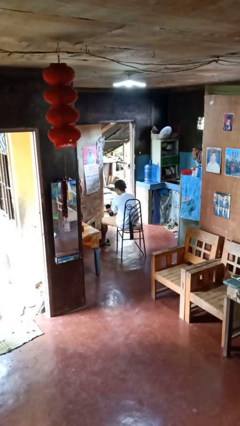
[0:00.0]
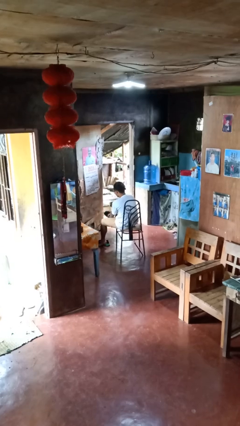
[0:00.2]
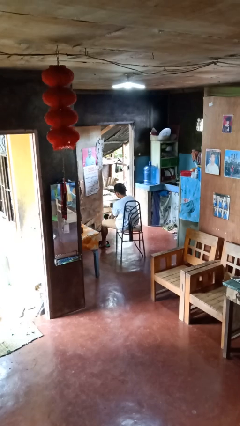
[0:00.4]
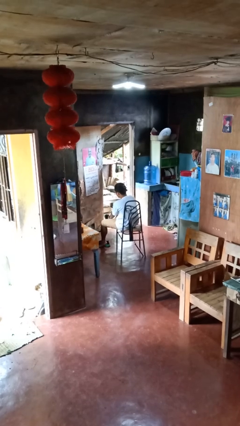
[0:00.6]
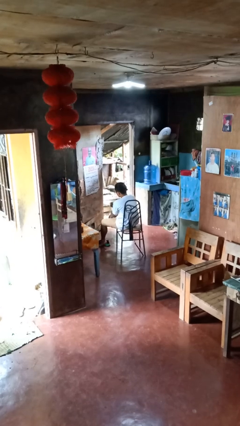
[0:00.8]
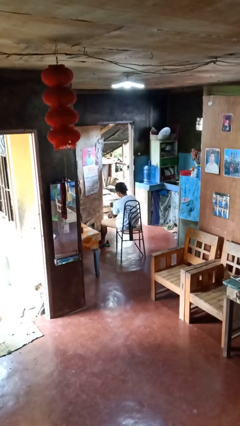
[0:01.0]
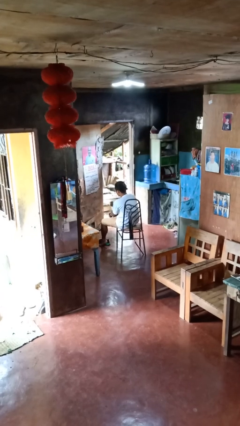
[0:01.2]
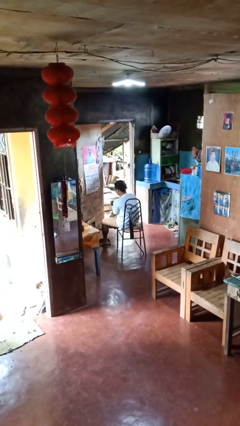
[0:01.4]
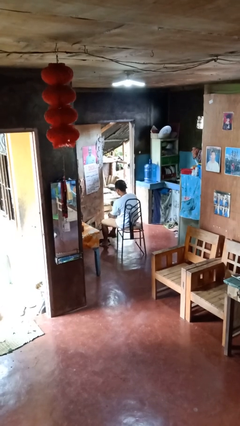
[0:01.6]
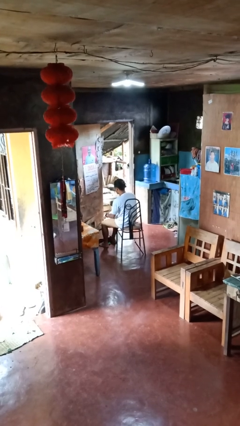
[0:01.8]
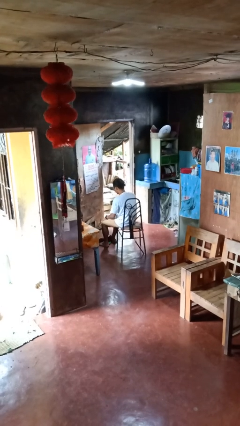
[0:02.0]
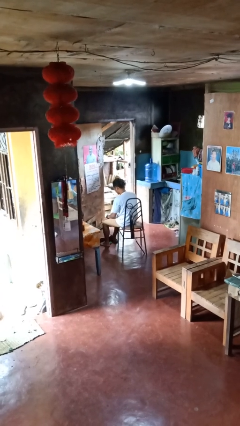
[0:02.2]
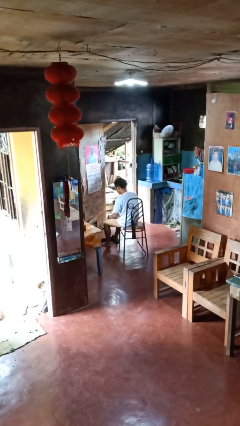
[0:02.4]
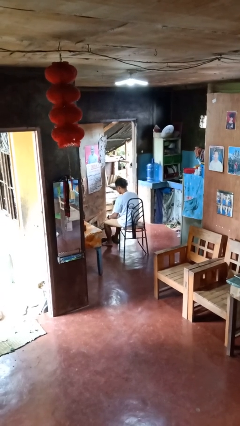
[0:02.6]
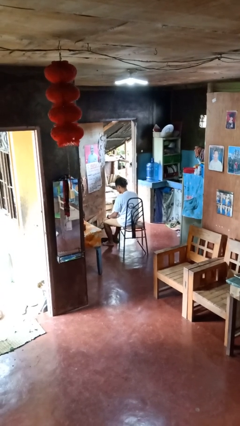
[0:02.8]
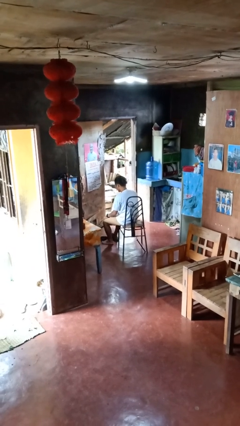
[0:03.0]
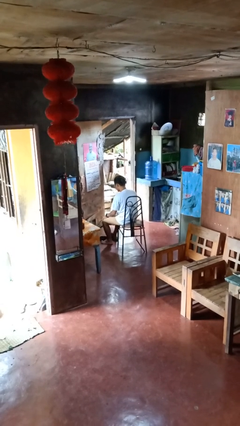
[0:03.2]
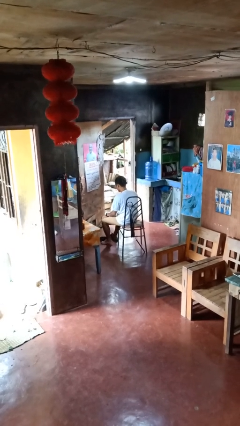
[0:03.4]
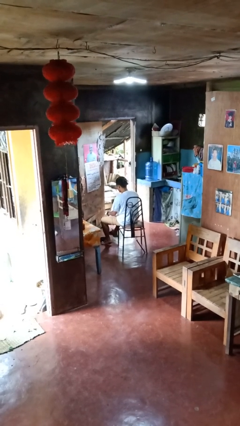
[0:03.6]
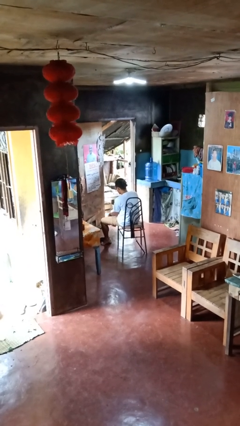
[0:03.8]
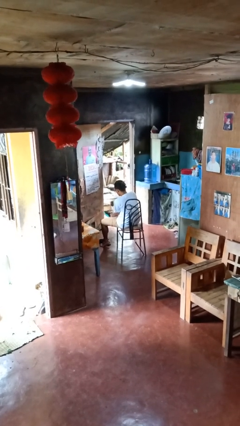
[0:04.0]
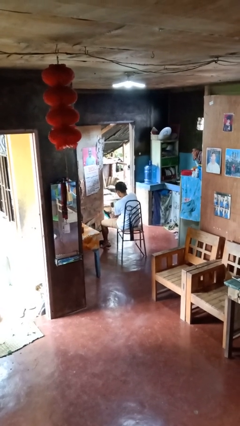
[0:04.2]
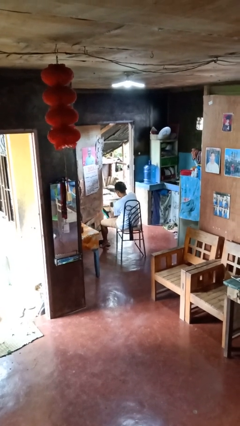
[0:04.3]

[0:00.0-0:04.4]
person puts on shoes

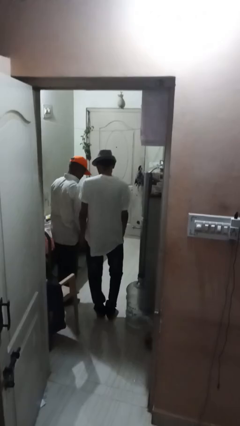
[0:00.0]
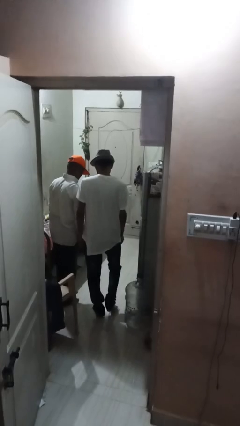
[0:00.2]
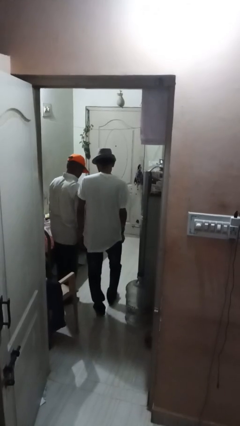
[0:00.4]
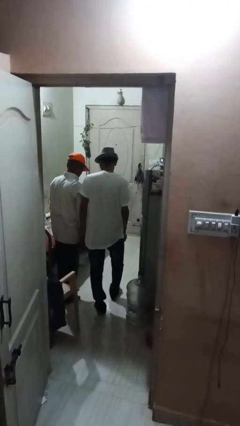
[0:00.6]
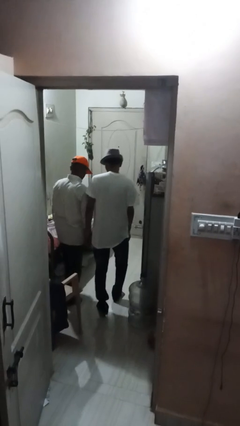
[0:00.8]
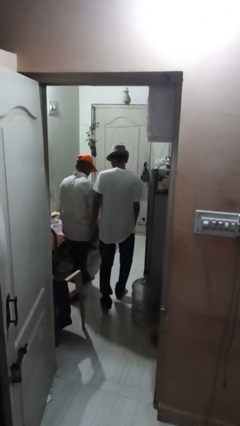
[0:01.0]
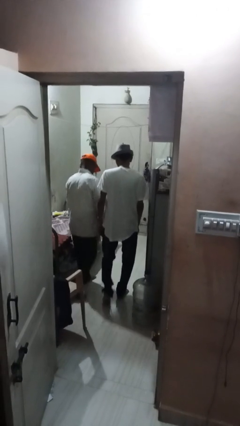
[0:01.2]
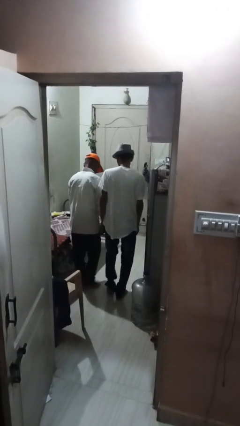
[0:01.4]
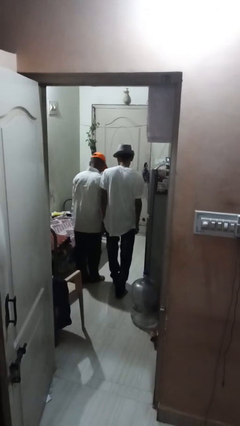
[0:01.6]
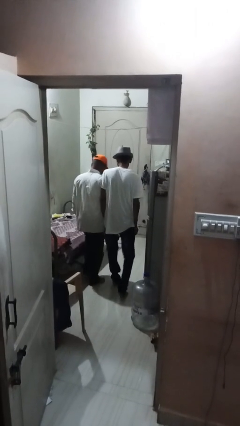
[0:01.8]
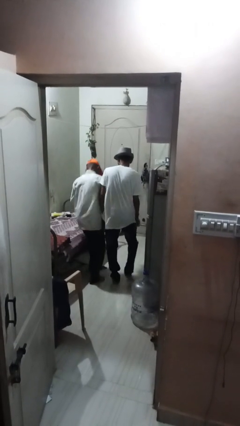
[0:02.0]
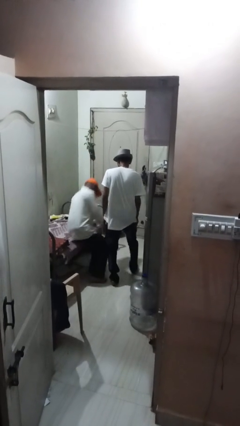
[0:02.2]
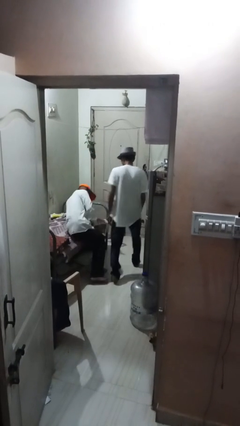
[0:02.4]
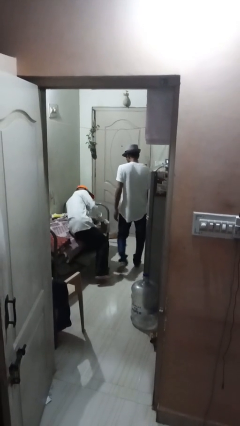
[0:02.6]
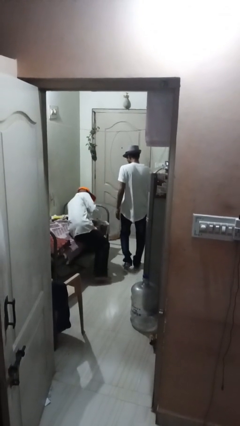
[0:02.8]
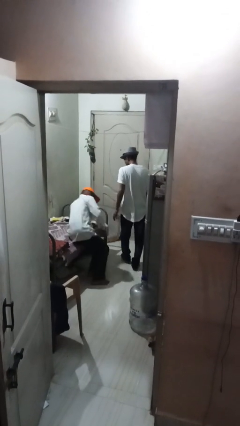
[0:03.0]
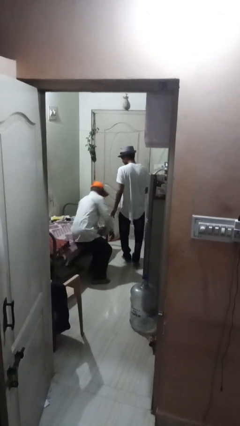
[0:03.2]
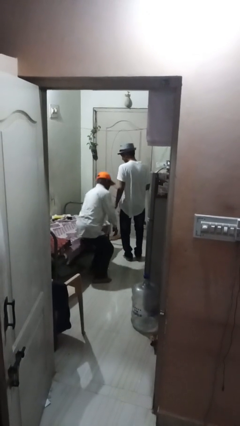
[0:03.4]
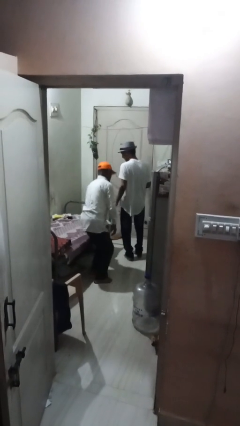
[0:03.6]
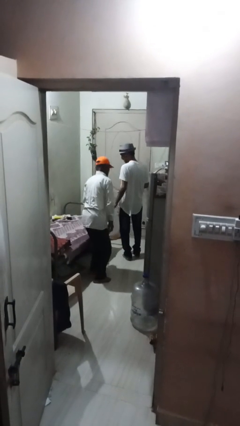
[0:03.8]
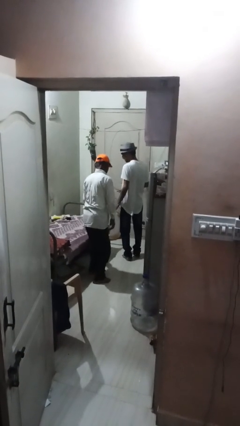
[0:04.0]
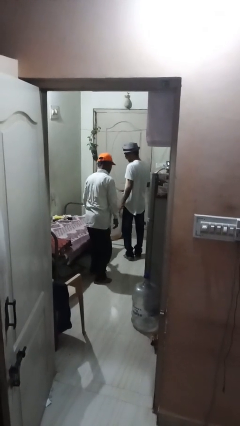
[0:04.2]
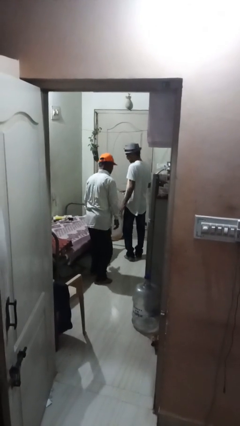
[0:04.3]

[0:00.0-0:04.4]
person bumps into person

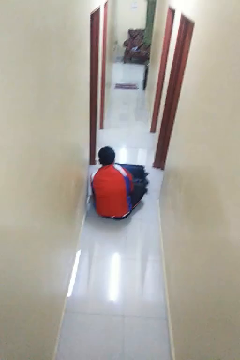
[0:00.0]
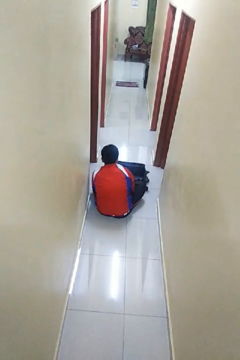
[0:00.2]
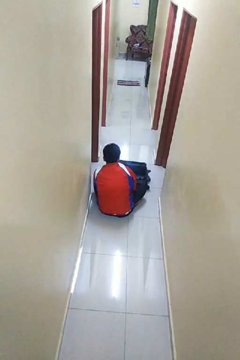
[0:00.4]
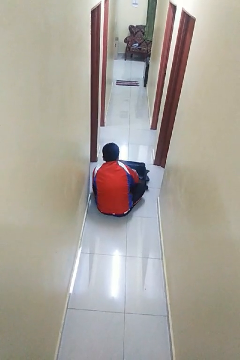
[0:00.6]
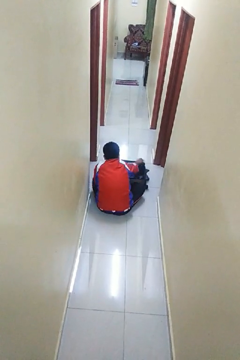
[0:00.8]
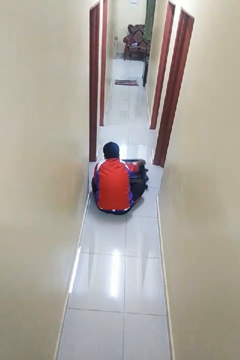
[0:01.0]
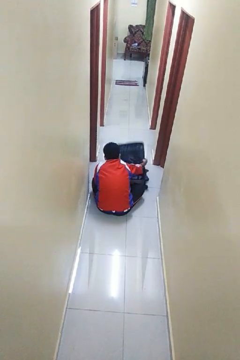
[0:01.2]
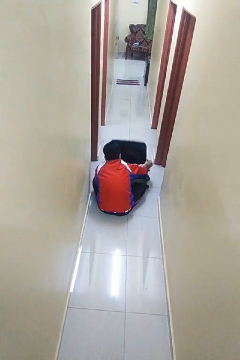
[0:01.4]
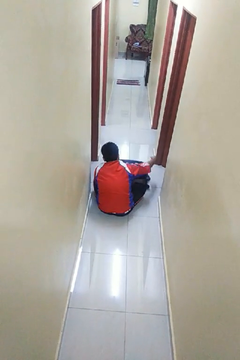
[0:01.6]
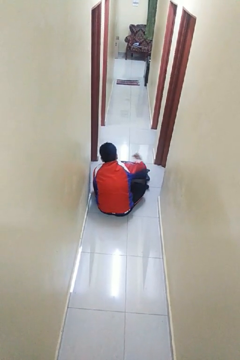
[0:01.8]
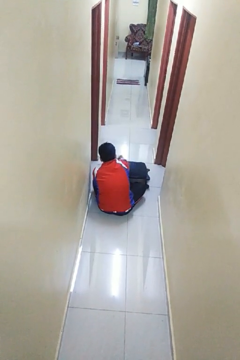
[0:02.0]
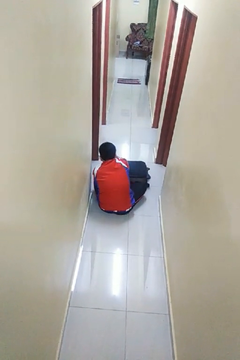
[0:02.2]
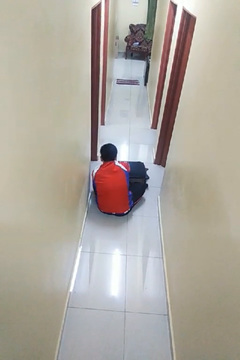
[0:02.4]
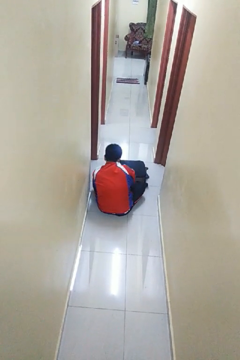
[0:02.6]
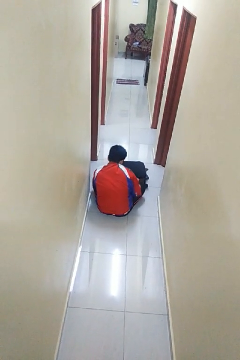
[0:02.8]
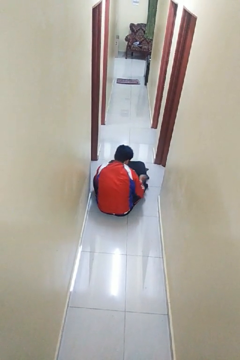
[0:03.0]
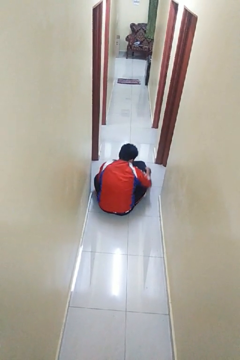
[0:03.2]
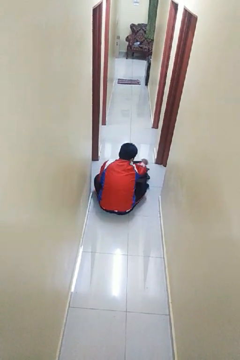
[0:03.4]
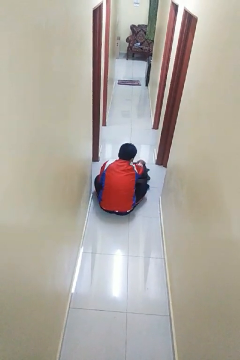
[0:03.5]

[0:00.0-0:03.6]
person closes suitcase

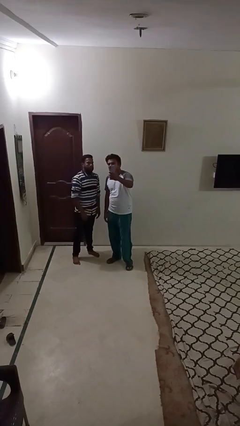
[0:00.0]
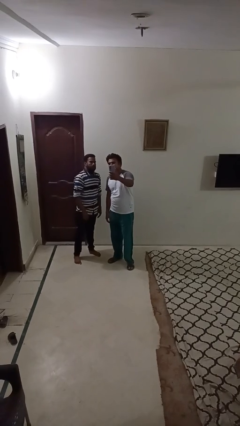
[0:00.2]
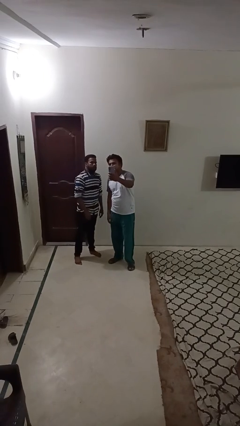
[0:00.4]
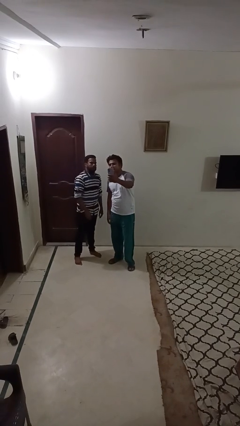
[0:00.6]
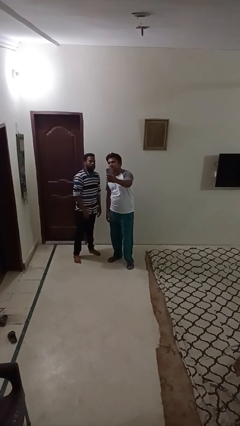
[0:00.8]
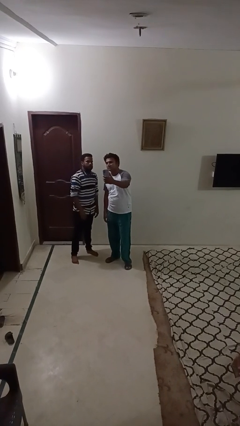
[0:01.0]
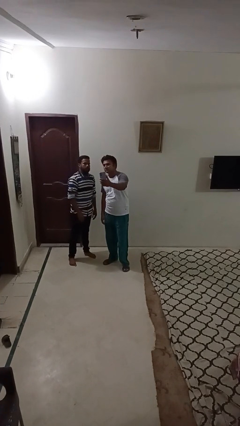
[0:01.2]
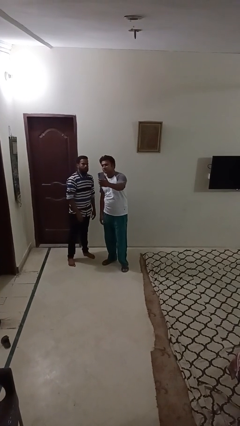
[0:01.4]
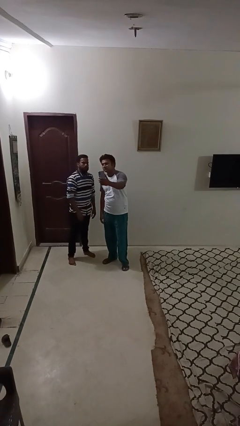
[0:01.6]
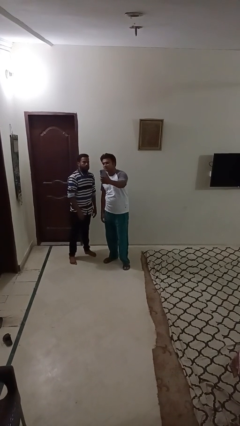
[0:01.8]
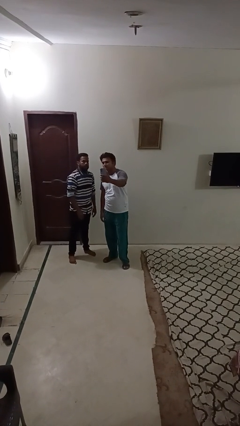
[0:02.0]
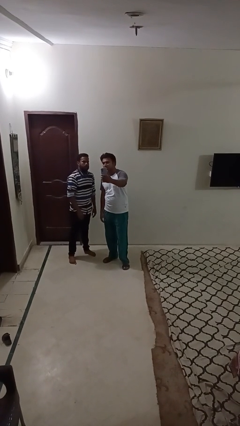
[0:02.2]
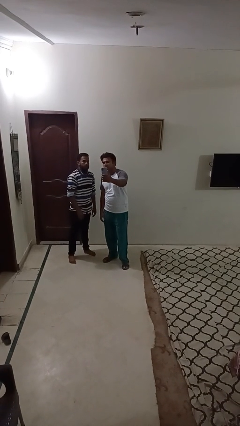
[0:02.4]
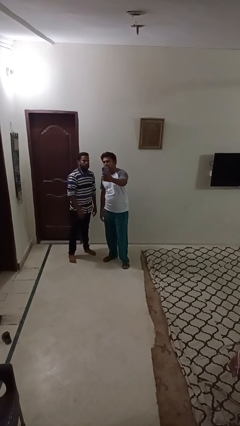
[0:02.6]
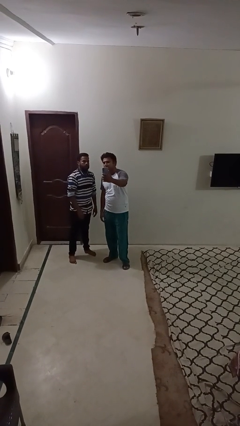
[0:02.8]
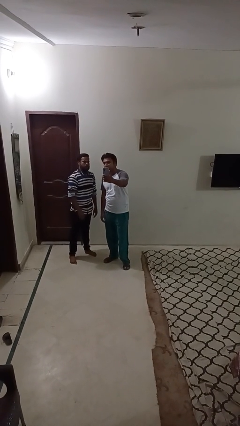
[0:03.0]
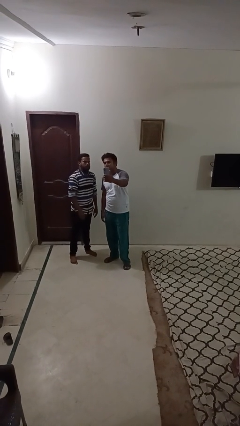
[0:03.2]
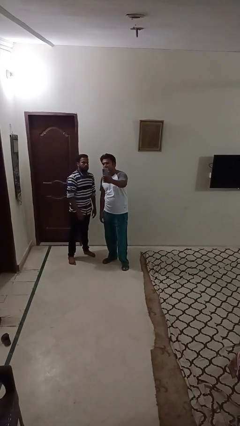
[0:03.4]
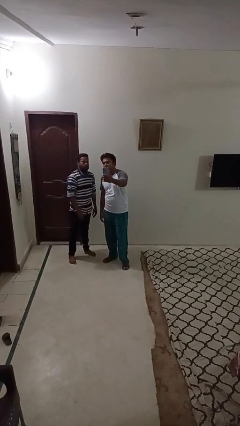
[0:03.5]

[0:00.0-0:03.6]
person takes selfie with person

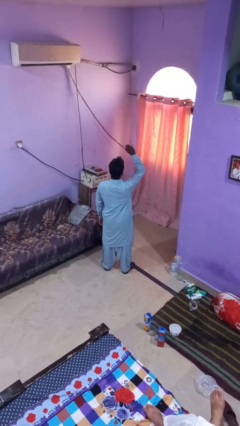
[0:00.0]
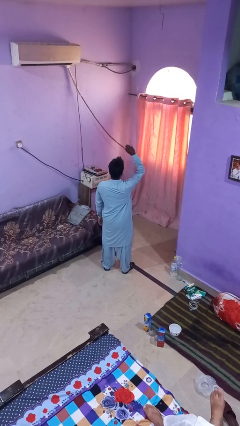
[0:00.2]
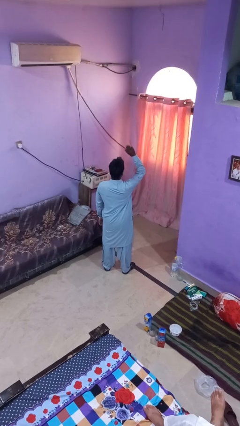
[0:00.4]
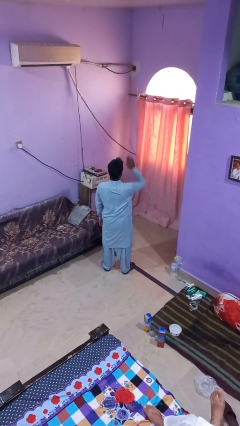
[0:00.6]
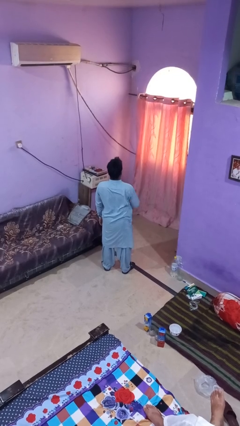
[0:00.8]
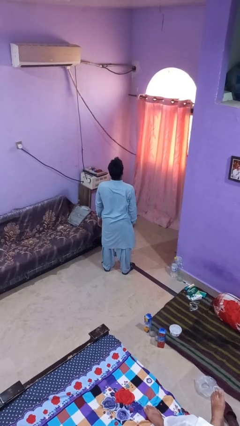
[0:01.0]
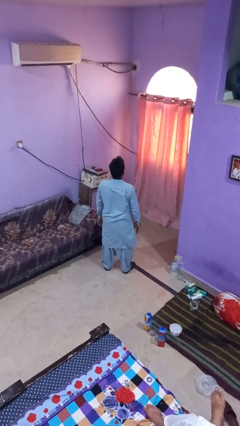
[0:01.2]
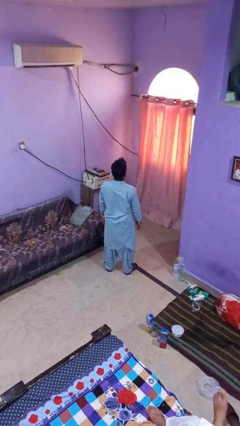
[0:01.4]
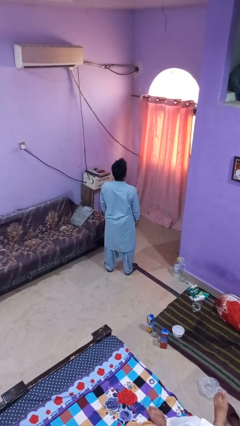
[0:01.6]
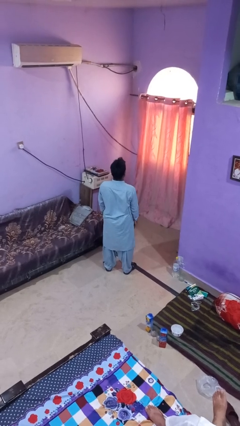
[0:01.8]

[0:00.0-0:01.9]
person gestures lower hand

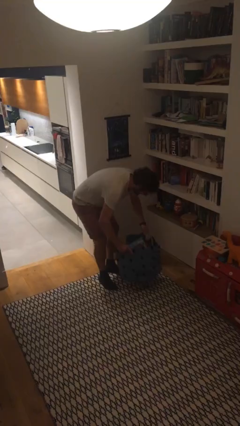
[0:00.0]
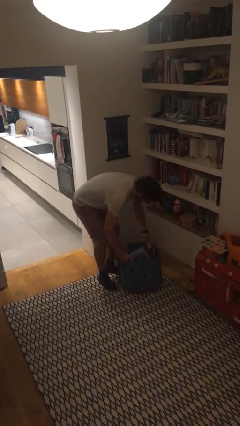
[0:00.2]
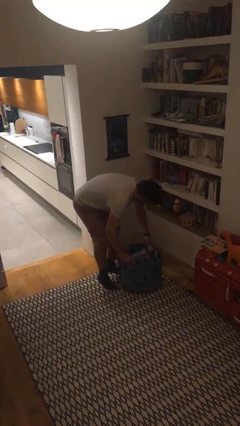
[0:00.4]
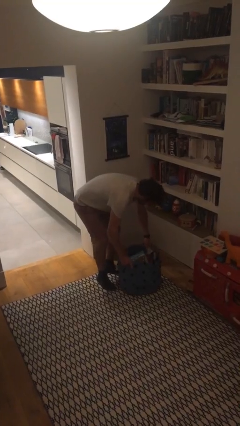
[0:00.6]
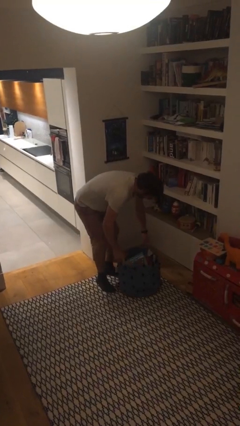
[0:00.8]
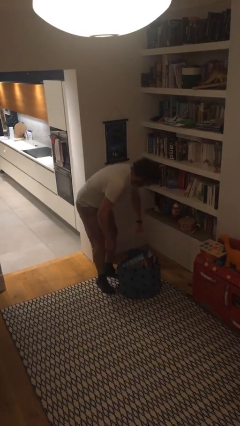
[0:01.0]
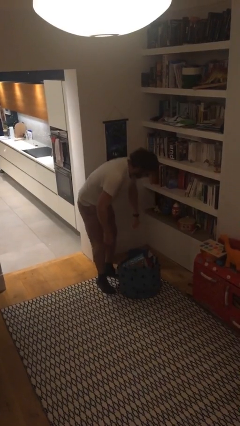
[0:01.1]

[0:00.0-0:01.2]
person puts down object on floor
